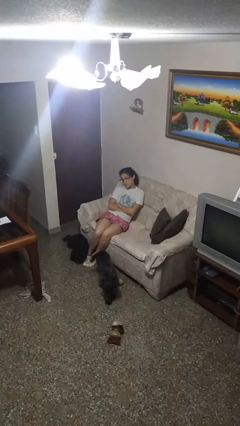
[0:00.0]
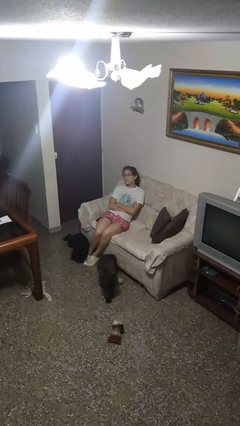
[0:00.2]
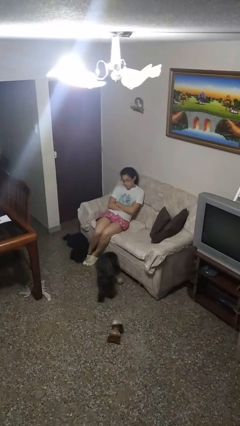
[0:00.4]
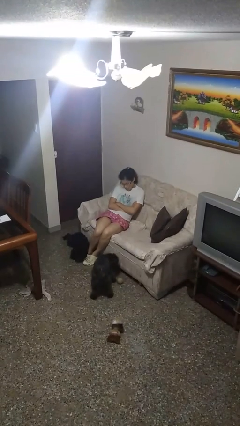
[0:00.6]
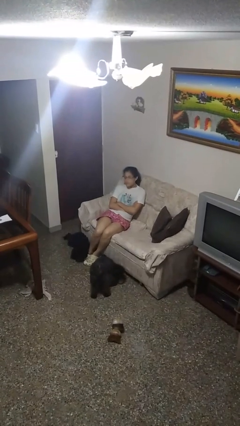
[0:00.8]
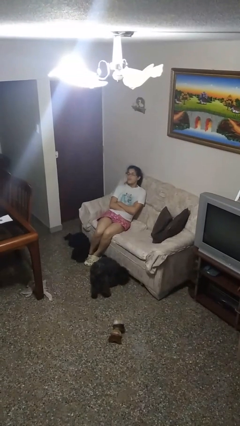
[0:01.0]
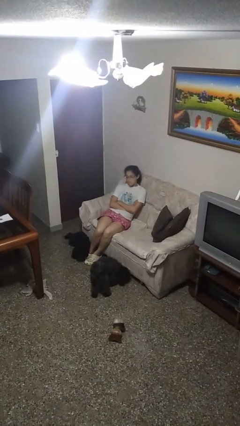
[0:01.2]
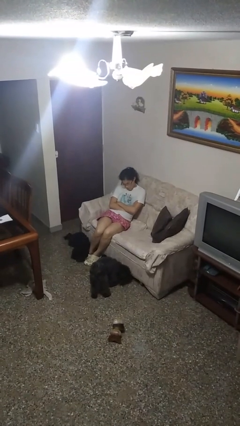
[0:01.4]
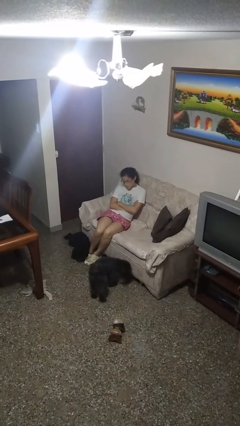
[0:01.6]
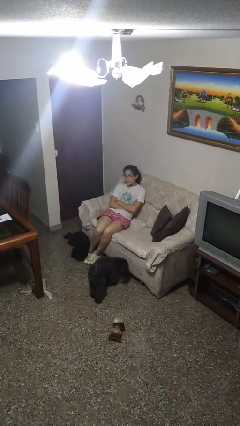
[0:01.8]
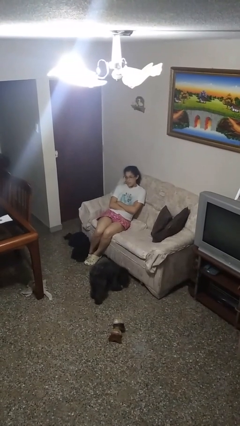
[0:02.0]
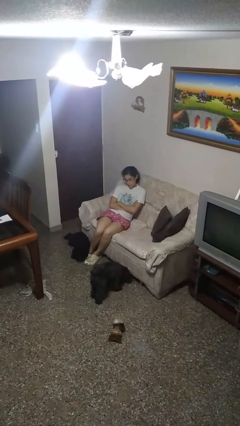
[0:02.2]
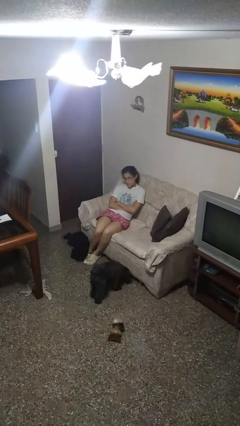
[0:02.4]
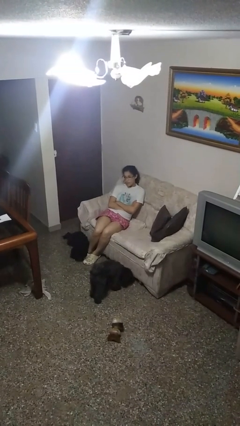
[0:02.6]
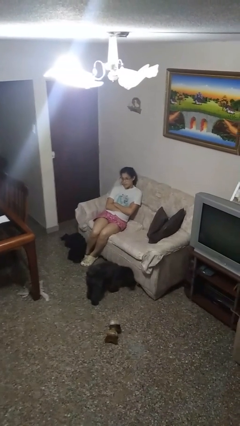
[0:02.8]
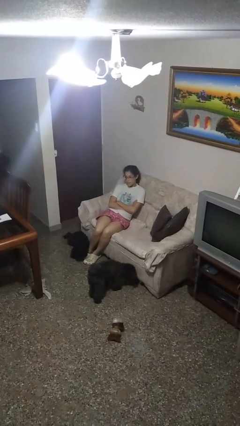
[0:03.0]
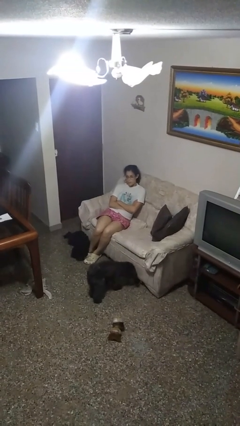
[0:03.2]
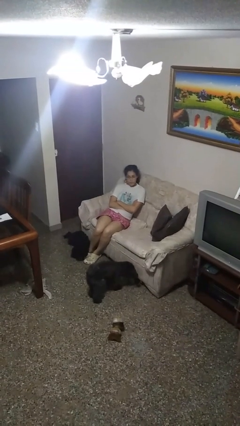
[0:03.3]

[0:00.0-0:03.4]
person nods head

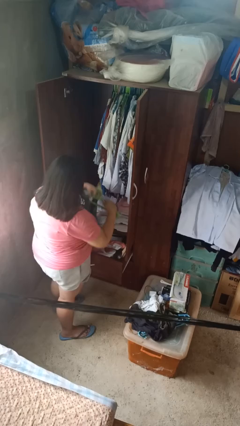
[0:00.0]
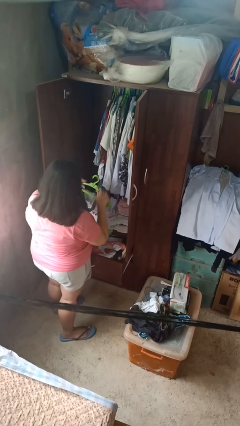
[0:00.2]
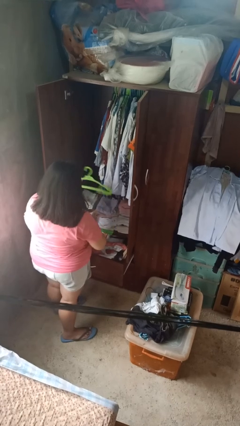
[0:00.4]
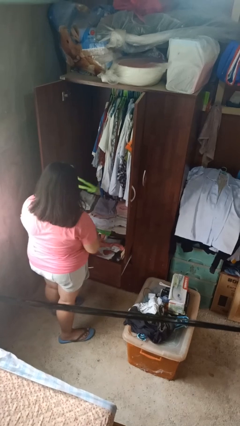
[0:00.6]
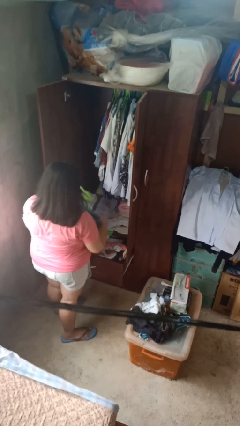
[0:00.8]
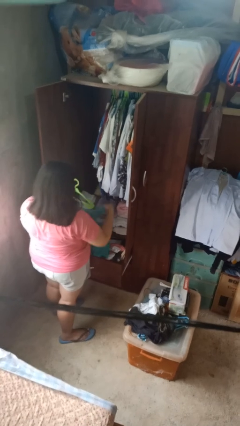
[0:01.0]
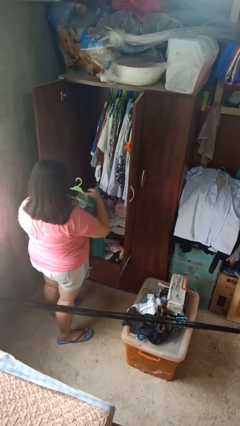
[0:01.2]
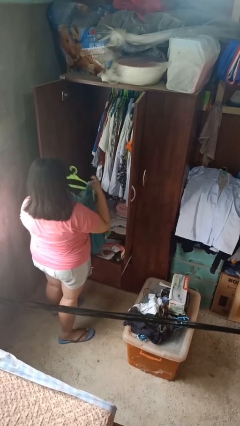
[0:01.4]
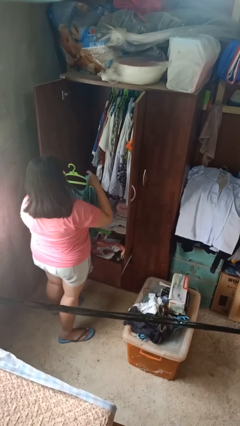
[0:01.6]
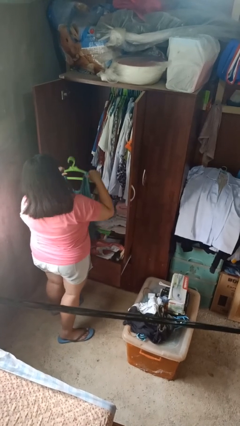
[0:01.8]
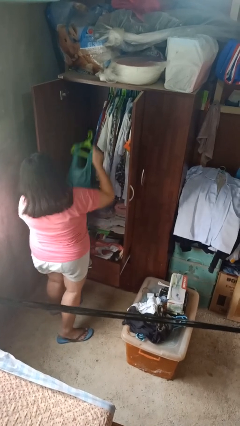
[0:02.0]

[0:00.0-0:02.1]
person puts clothes into closet

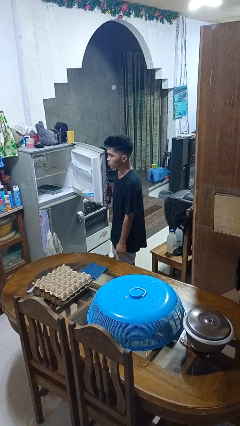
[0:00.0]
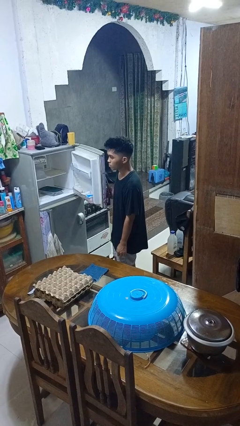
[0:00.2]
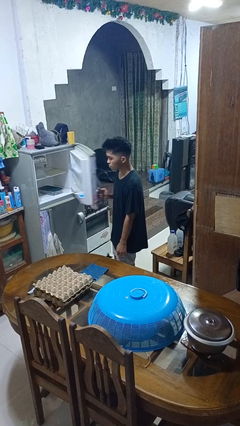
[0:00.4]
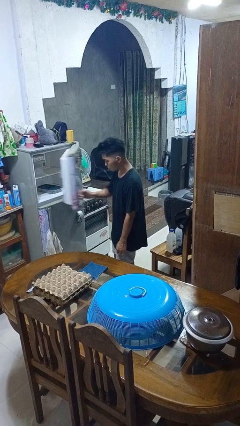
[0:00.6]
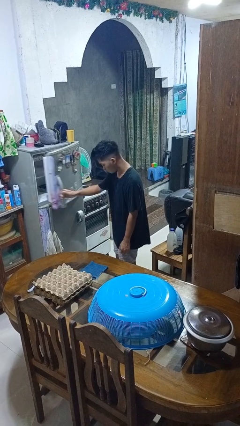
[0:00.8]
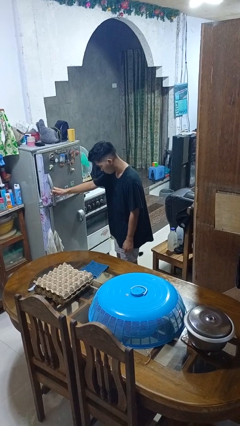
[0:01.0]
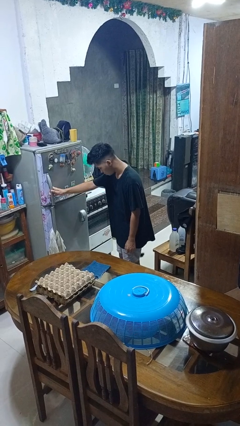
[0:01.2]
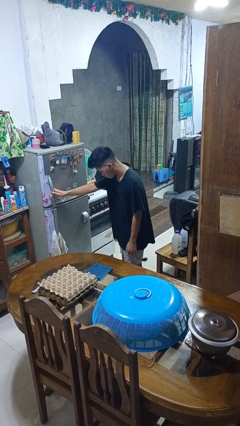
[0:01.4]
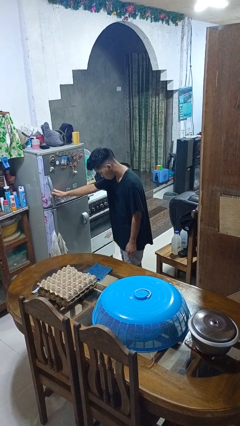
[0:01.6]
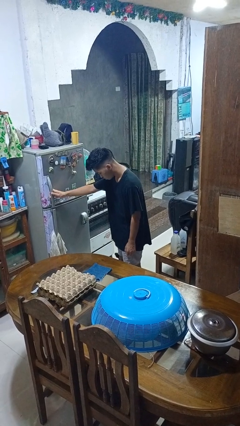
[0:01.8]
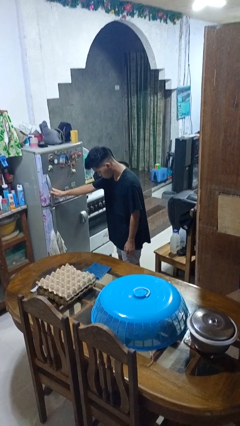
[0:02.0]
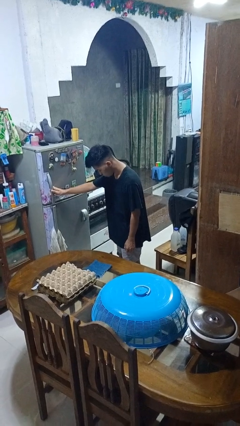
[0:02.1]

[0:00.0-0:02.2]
person closes refrigerator

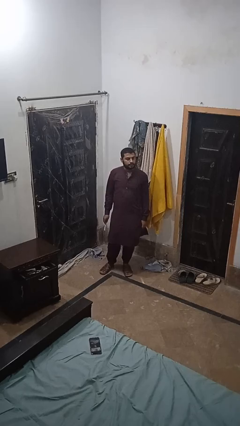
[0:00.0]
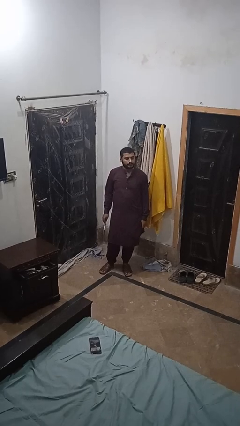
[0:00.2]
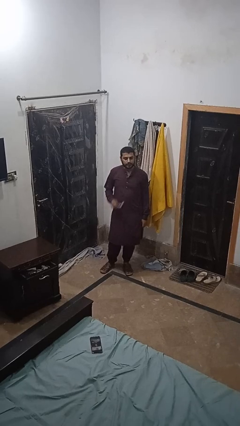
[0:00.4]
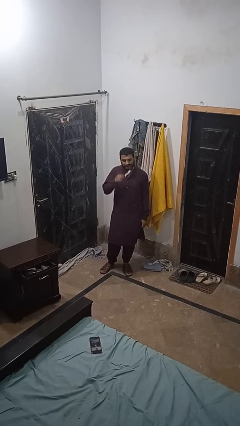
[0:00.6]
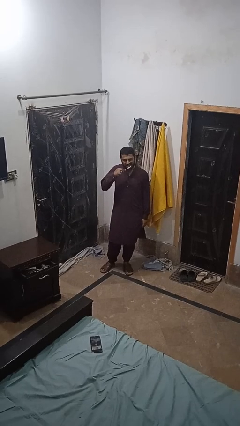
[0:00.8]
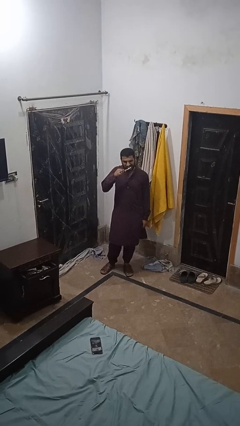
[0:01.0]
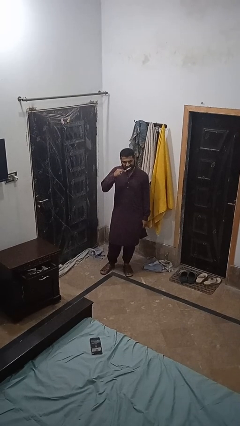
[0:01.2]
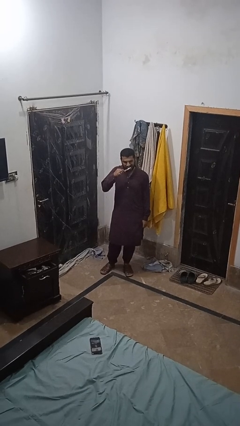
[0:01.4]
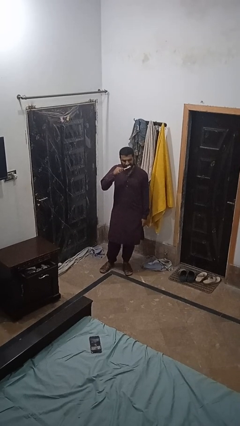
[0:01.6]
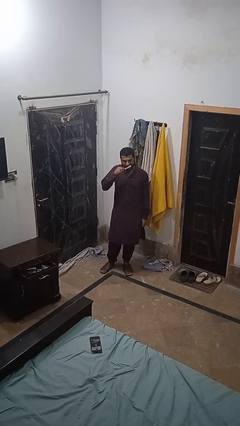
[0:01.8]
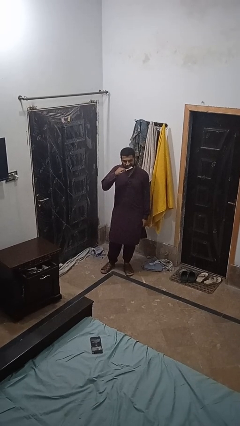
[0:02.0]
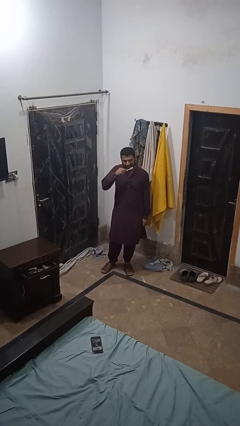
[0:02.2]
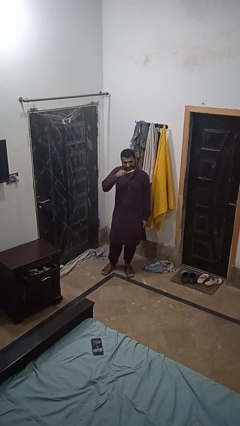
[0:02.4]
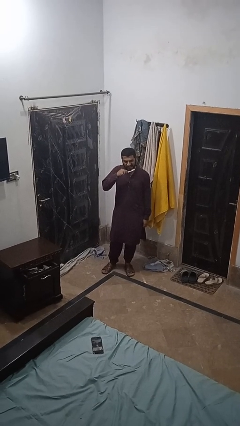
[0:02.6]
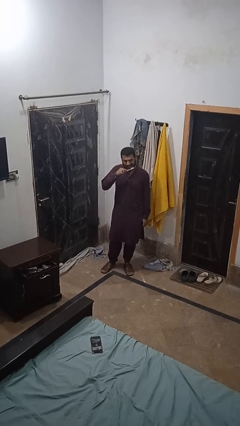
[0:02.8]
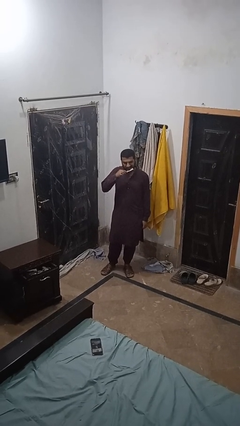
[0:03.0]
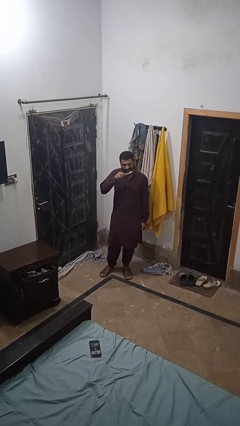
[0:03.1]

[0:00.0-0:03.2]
person brushes teeth

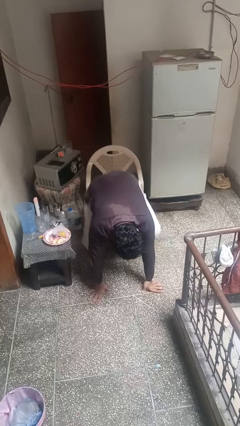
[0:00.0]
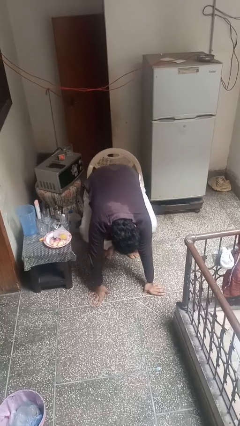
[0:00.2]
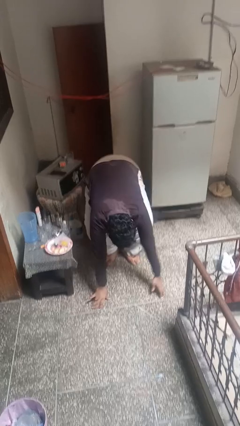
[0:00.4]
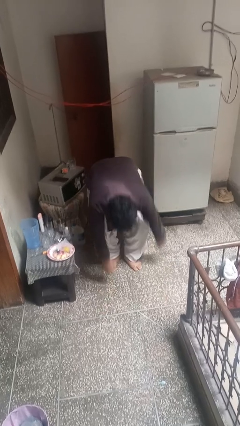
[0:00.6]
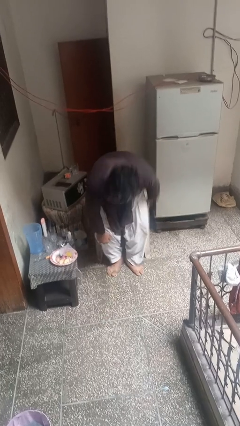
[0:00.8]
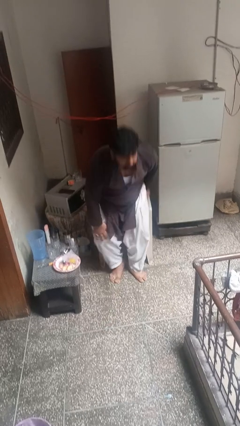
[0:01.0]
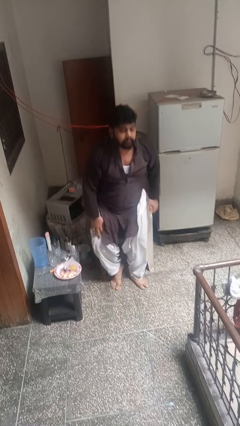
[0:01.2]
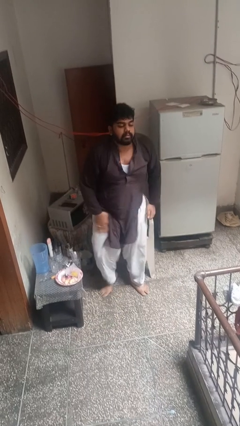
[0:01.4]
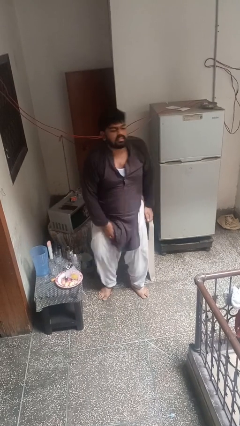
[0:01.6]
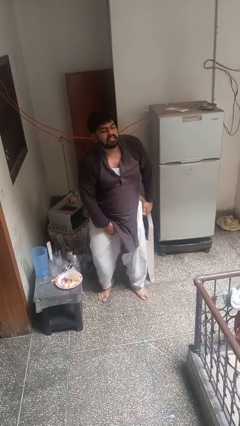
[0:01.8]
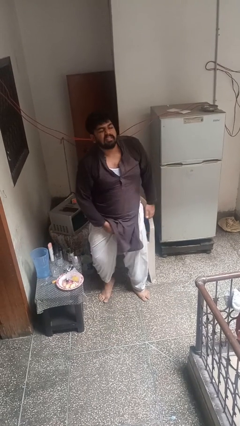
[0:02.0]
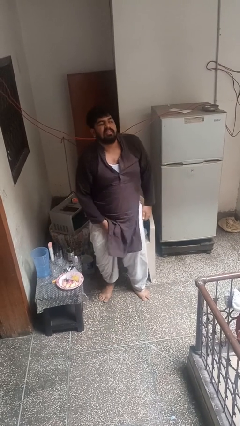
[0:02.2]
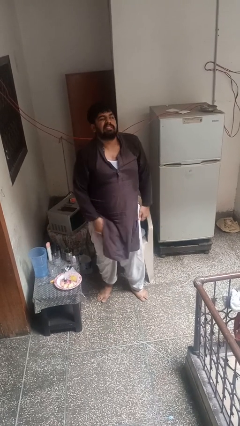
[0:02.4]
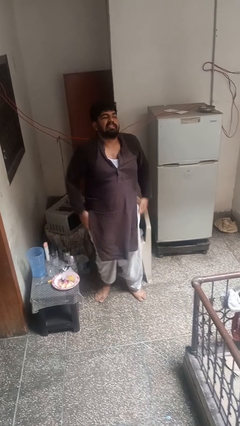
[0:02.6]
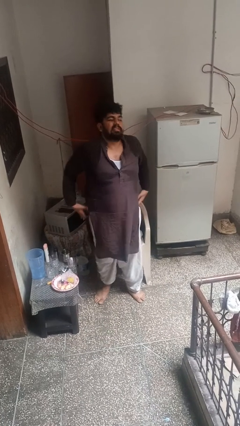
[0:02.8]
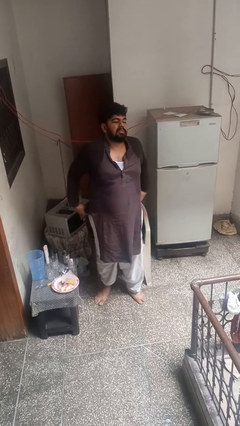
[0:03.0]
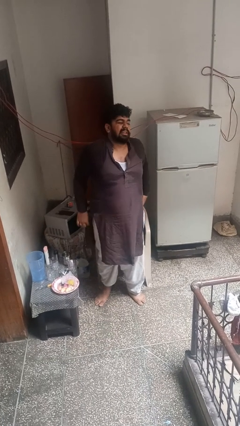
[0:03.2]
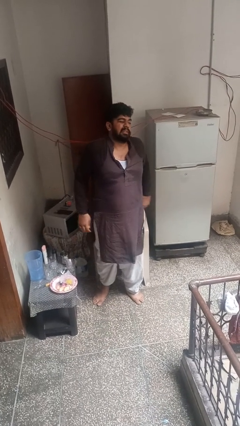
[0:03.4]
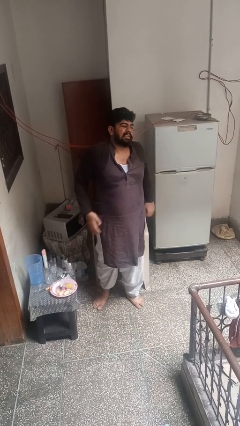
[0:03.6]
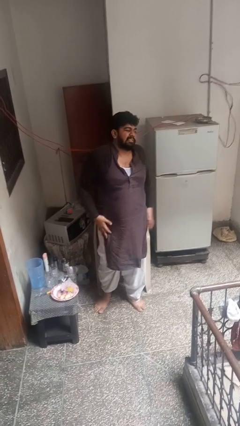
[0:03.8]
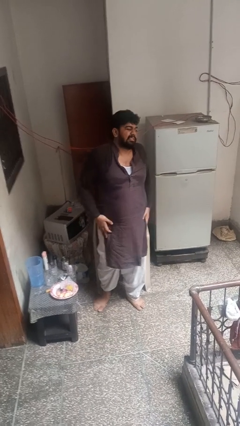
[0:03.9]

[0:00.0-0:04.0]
person stands up from floor

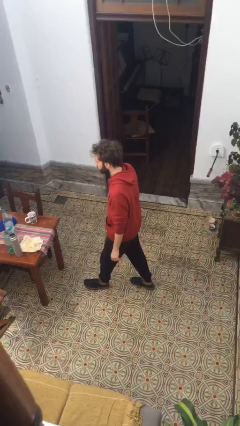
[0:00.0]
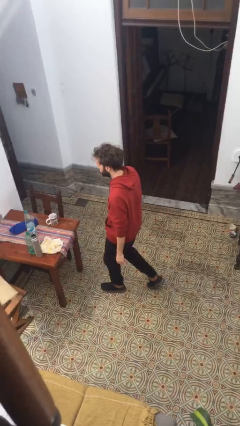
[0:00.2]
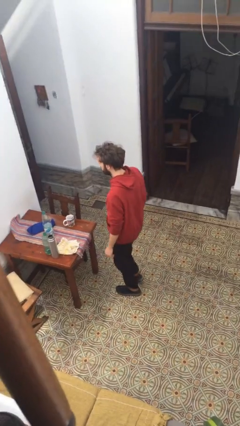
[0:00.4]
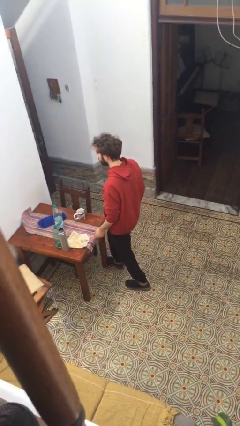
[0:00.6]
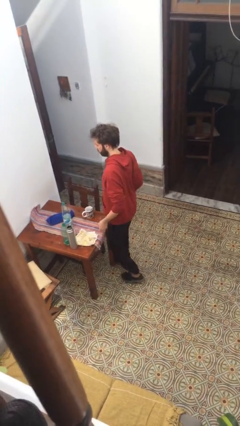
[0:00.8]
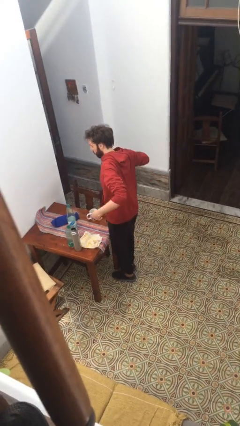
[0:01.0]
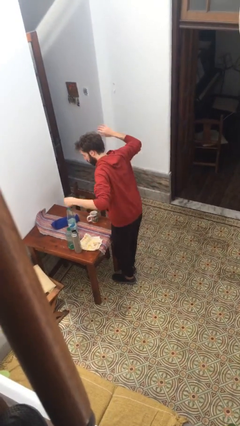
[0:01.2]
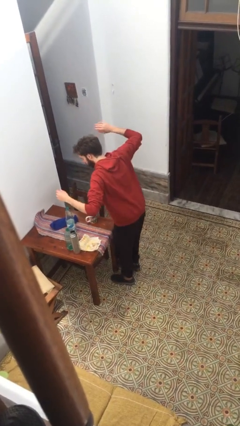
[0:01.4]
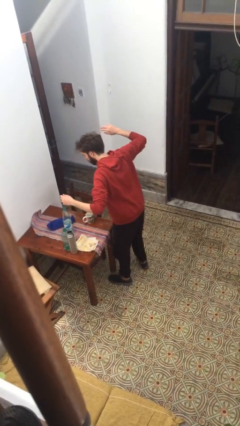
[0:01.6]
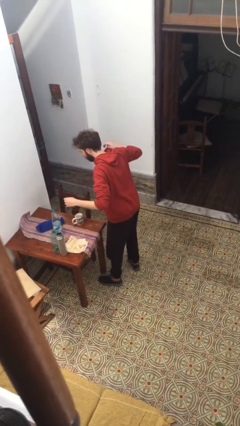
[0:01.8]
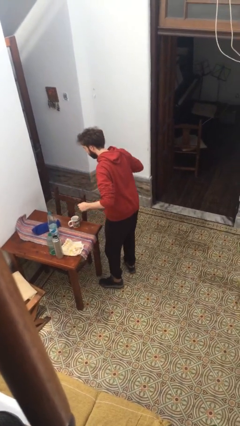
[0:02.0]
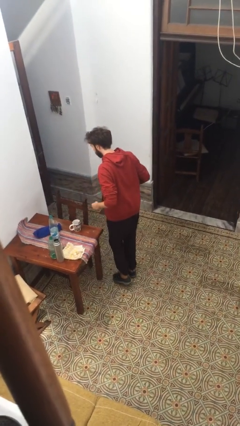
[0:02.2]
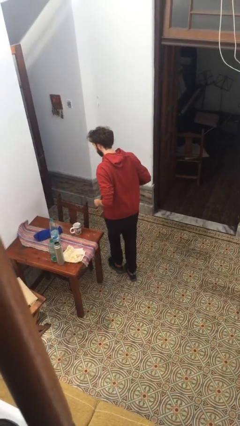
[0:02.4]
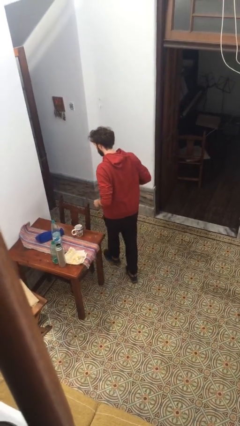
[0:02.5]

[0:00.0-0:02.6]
person bumps into table

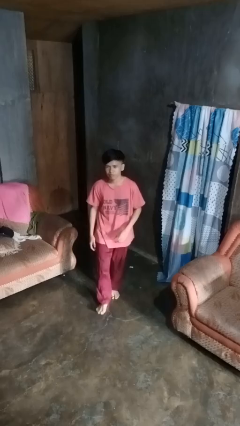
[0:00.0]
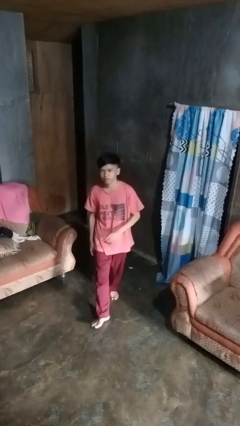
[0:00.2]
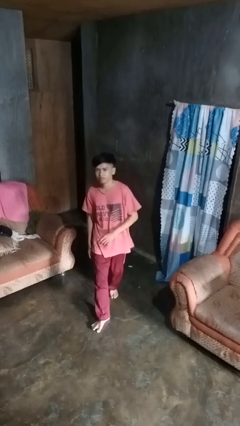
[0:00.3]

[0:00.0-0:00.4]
person karate kicks
